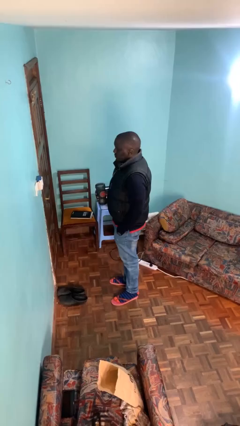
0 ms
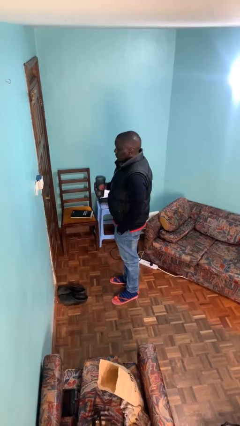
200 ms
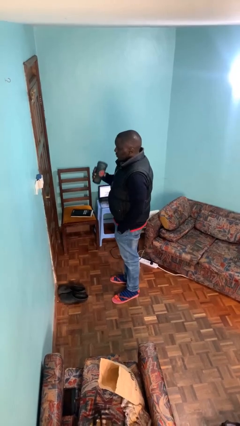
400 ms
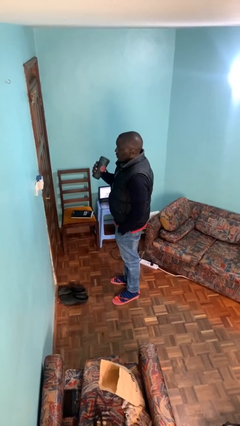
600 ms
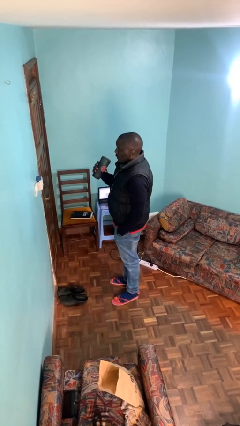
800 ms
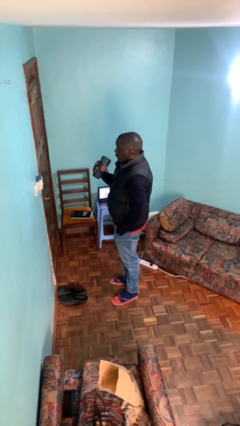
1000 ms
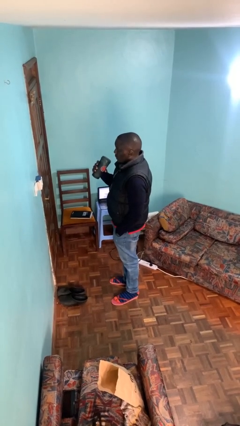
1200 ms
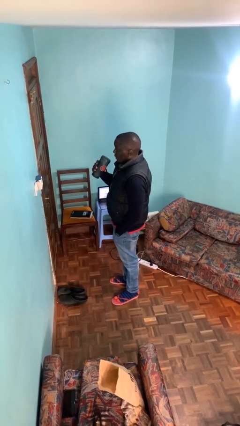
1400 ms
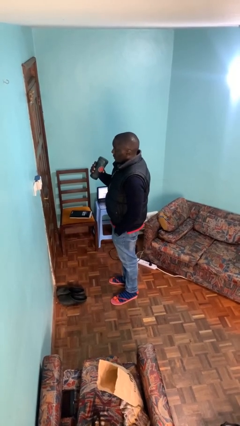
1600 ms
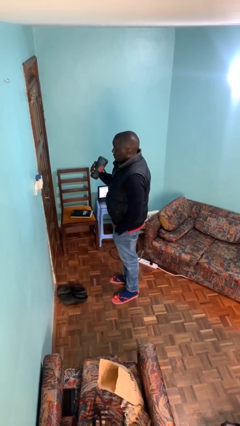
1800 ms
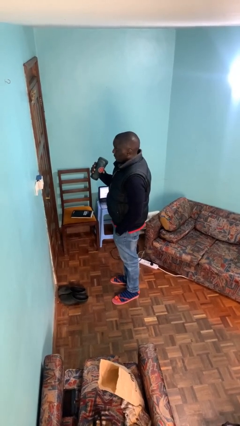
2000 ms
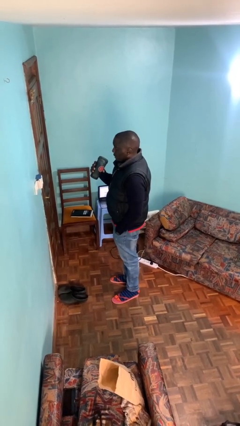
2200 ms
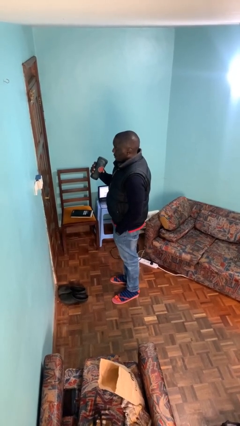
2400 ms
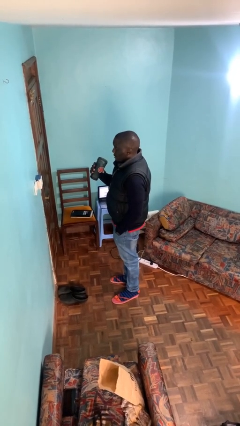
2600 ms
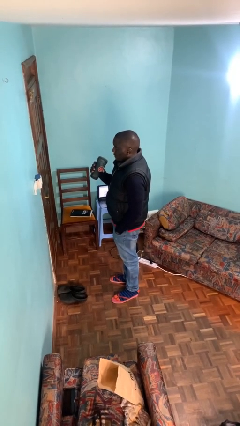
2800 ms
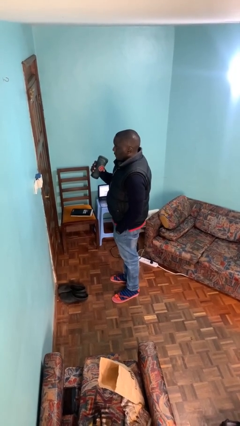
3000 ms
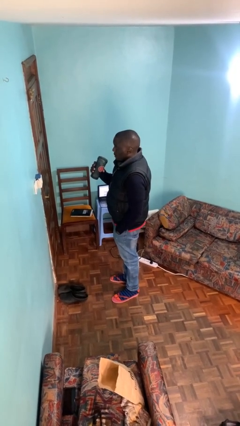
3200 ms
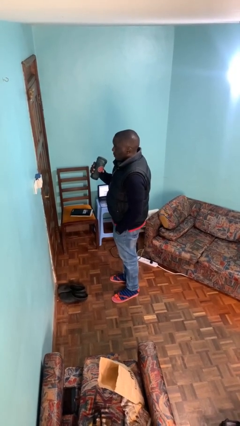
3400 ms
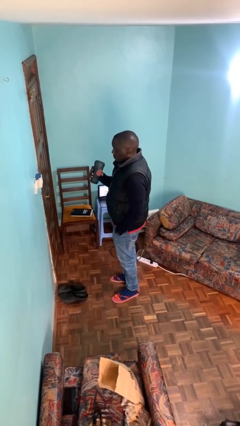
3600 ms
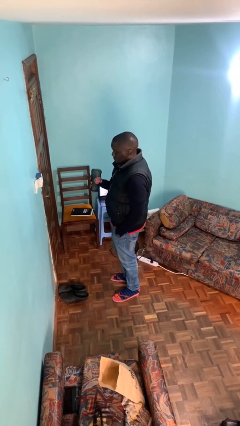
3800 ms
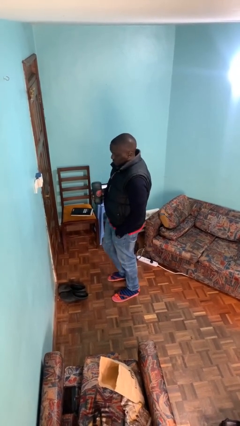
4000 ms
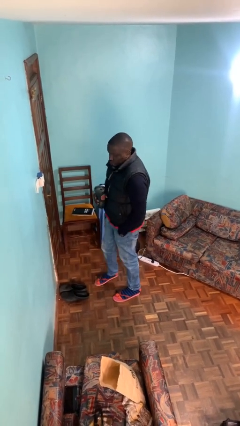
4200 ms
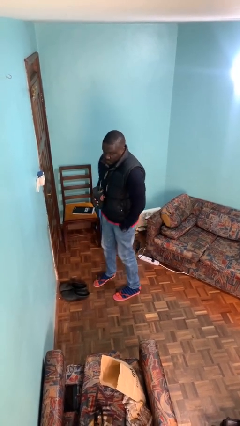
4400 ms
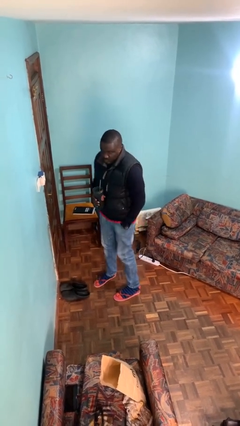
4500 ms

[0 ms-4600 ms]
person drinks from straw

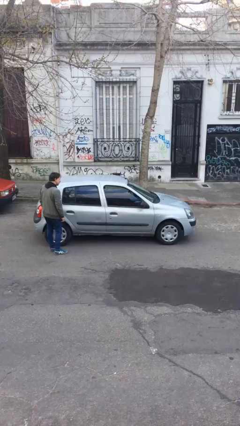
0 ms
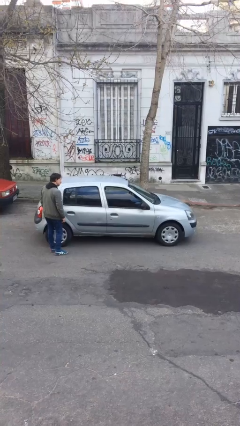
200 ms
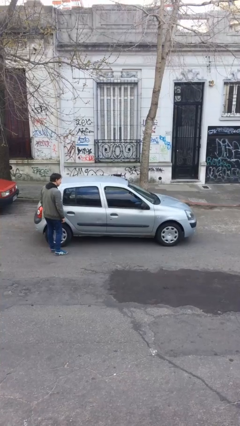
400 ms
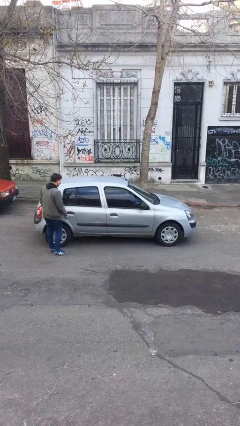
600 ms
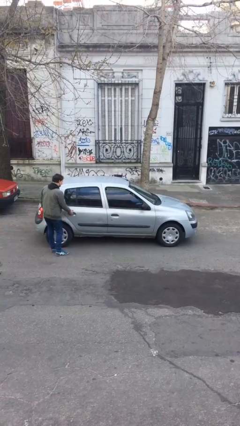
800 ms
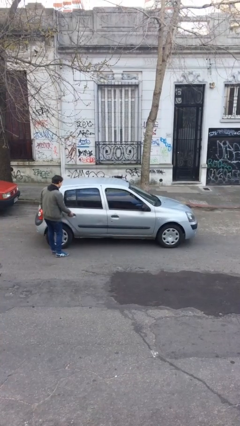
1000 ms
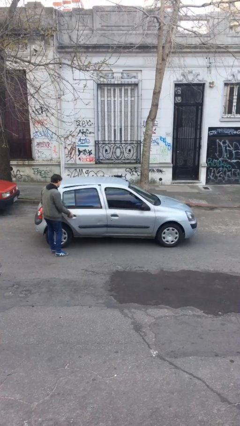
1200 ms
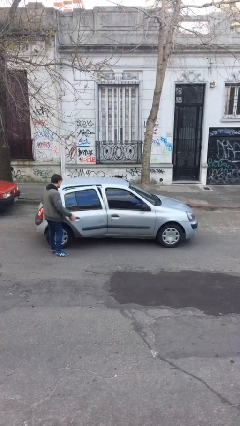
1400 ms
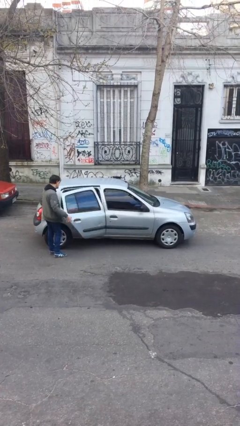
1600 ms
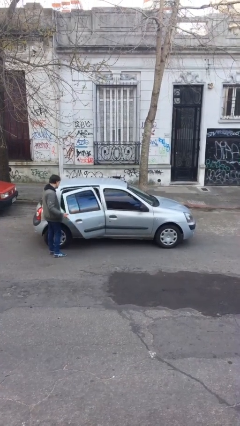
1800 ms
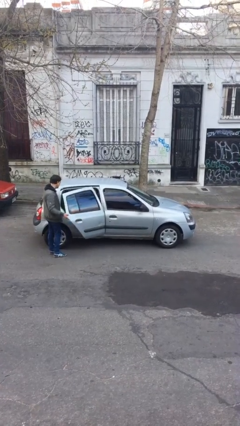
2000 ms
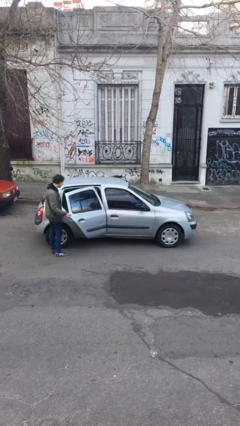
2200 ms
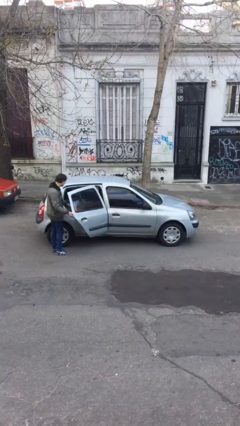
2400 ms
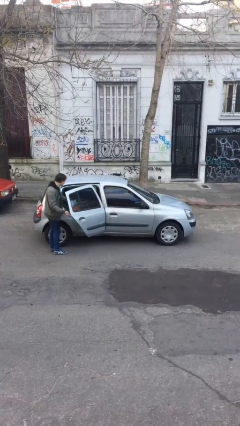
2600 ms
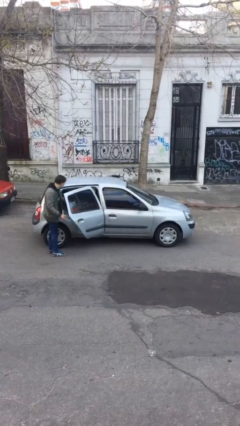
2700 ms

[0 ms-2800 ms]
person opens car door

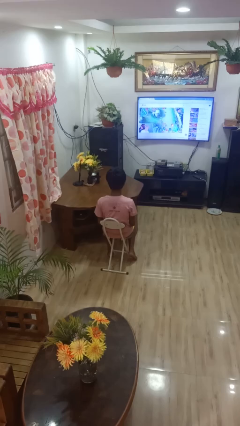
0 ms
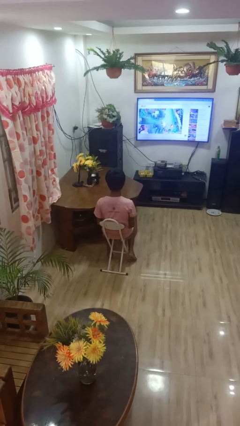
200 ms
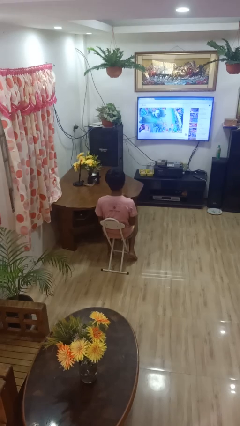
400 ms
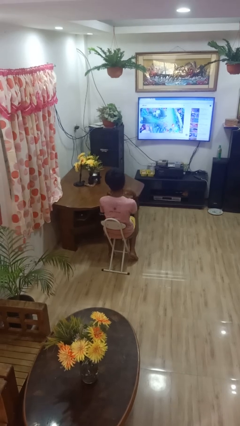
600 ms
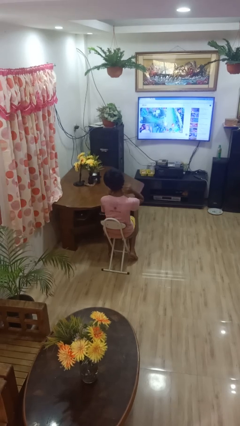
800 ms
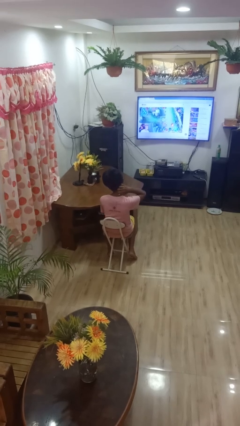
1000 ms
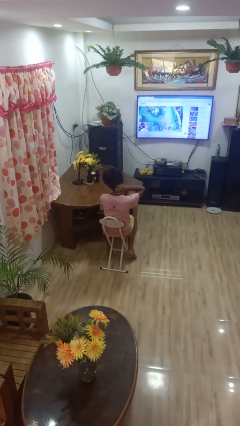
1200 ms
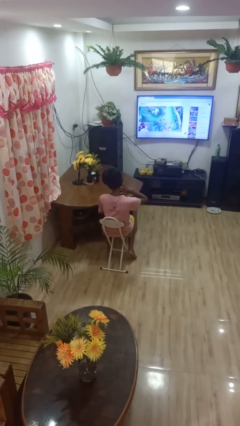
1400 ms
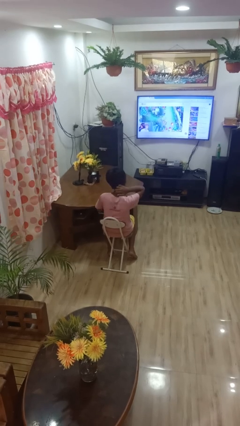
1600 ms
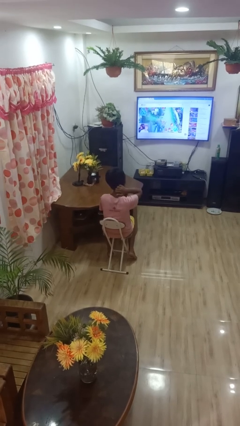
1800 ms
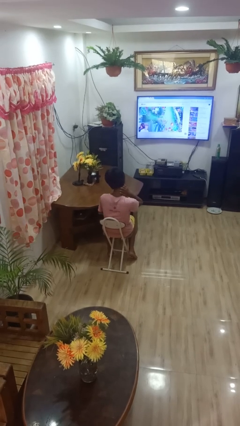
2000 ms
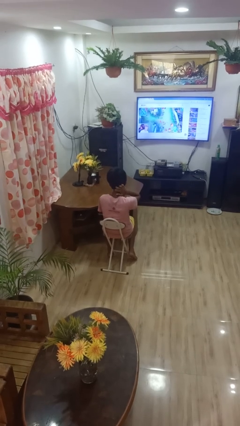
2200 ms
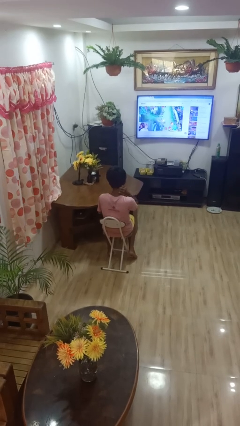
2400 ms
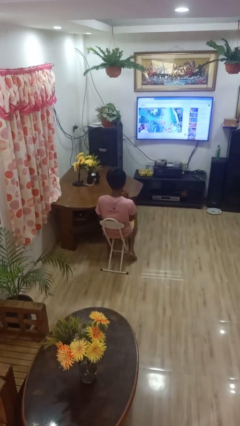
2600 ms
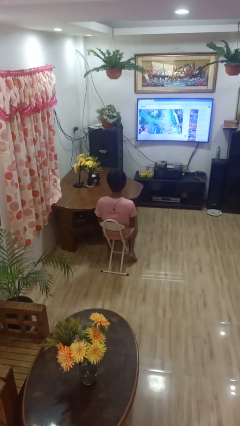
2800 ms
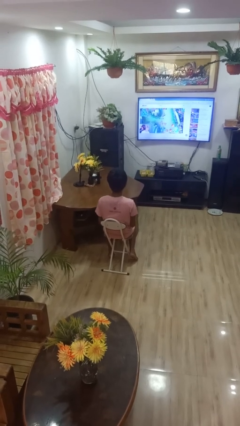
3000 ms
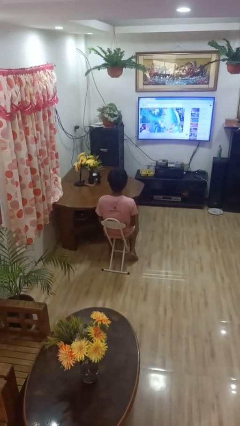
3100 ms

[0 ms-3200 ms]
person rubs neck

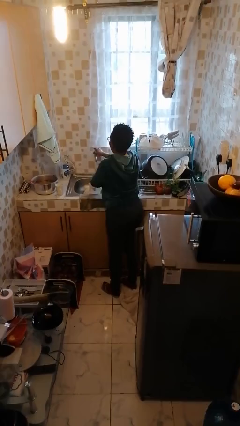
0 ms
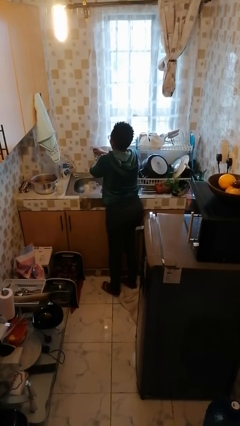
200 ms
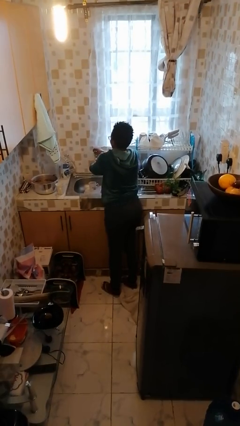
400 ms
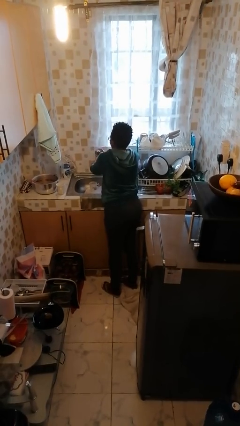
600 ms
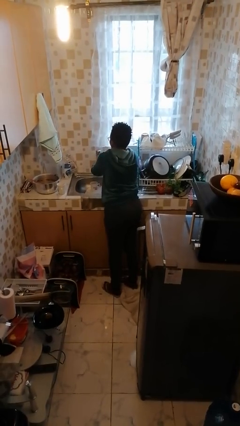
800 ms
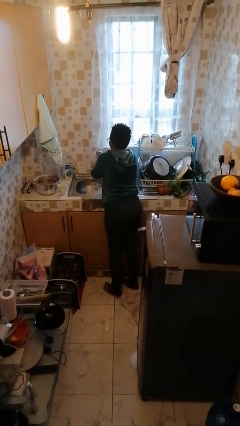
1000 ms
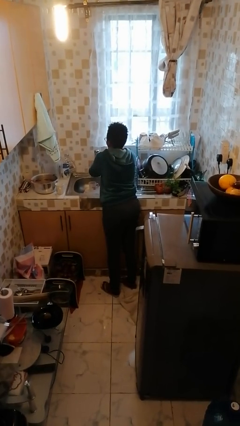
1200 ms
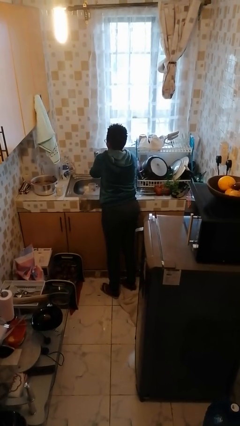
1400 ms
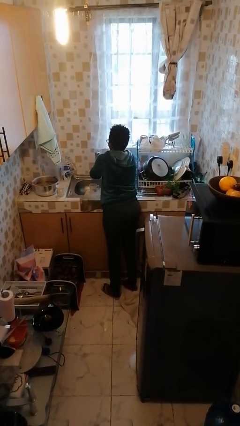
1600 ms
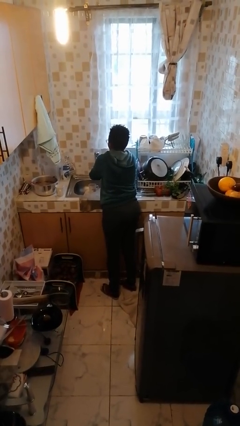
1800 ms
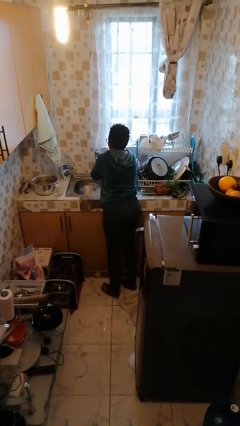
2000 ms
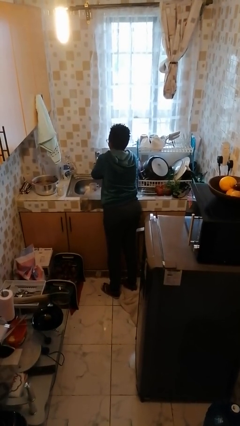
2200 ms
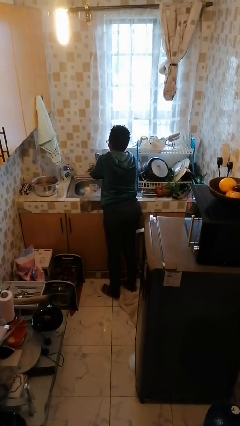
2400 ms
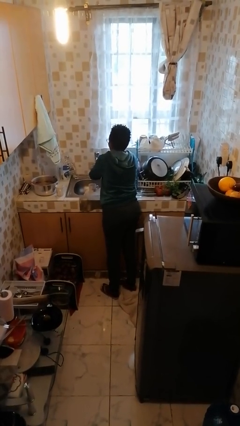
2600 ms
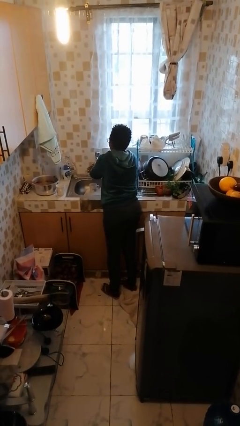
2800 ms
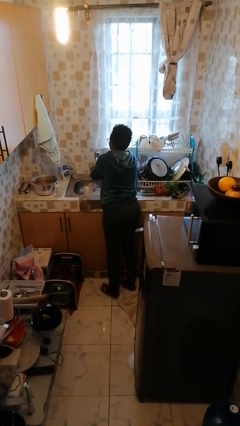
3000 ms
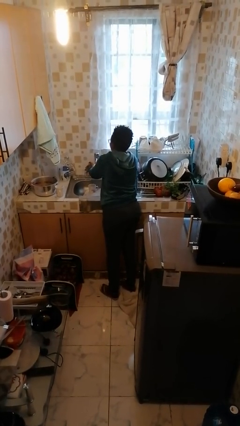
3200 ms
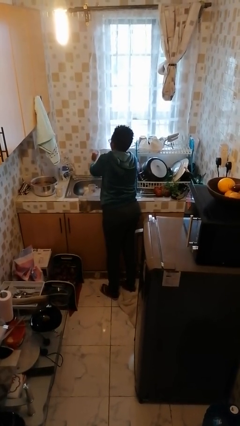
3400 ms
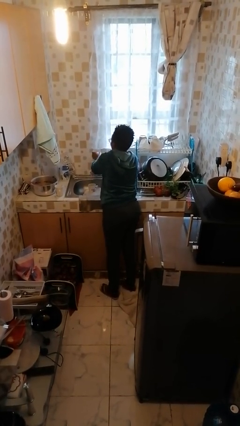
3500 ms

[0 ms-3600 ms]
person washes hands

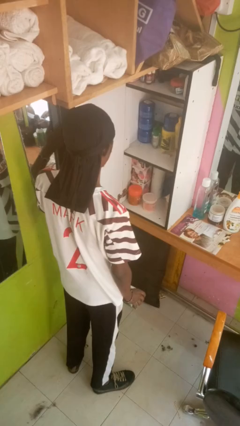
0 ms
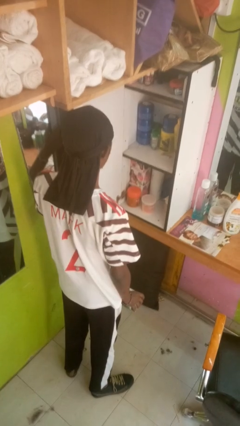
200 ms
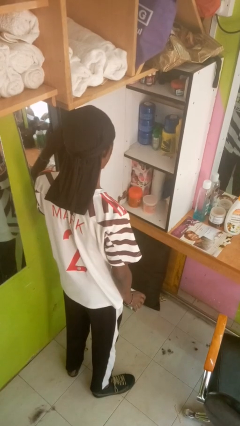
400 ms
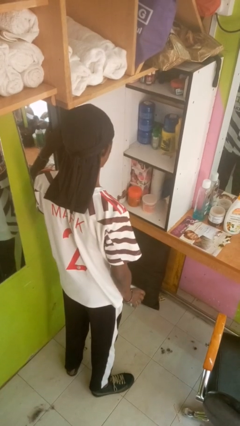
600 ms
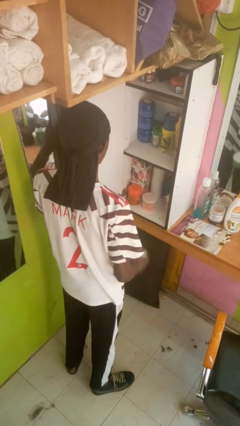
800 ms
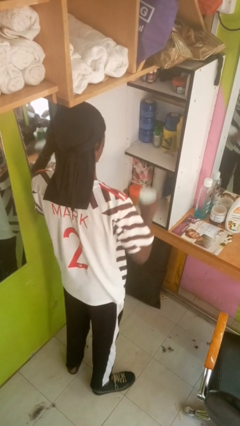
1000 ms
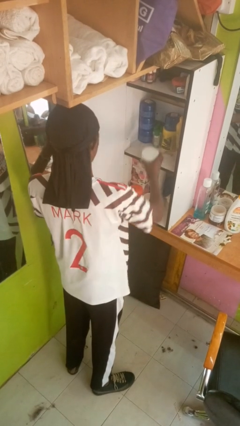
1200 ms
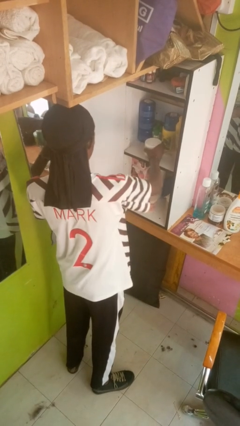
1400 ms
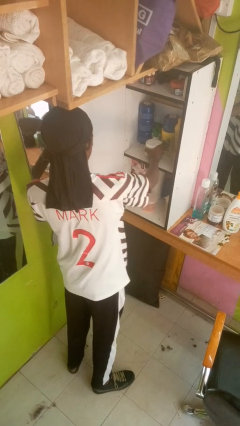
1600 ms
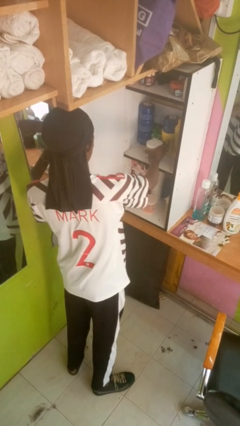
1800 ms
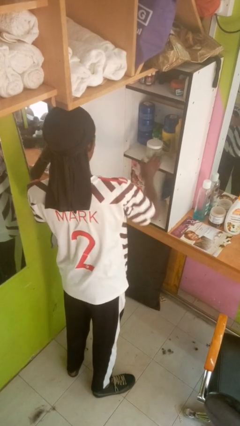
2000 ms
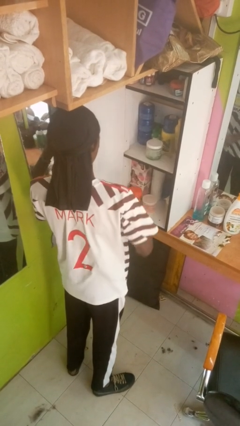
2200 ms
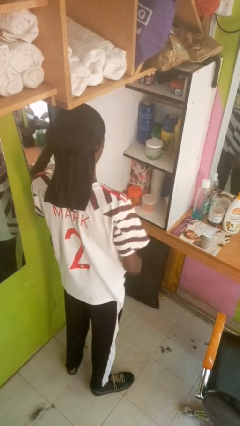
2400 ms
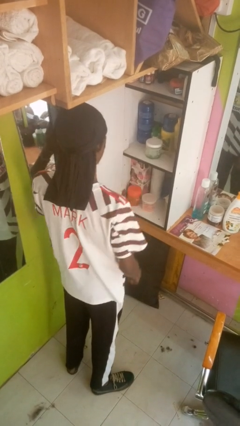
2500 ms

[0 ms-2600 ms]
person puts down object into cabinet

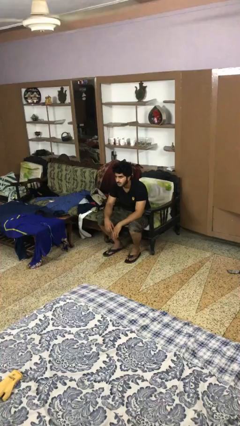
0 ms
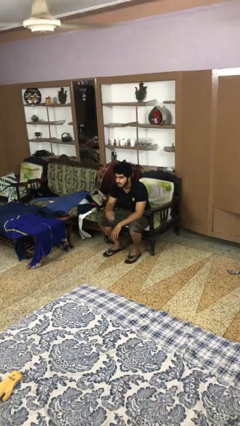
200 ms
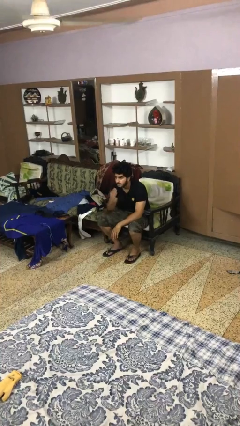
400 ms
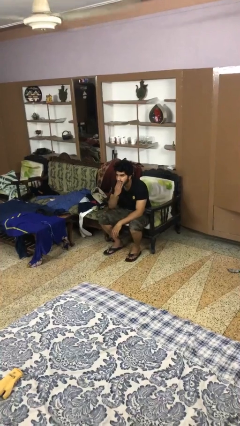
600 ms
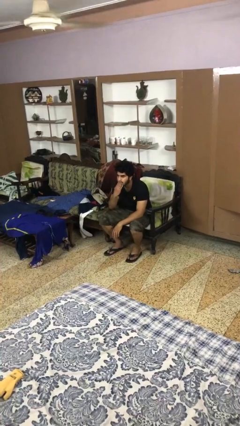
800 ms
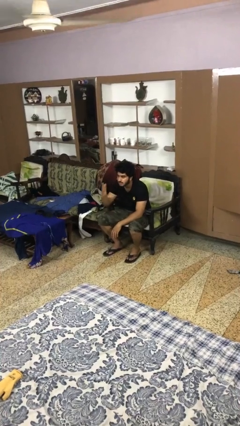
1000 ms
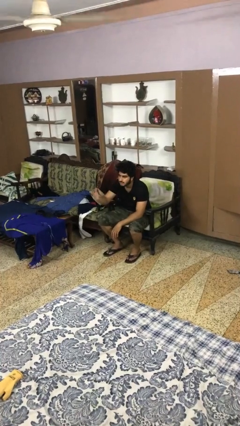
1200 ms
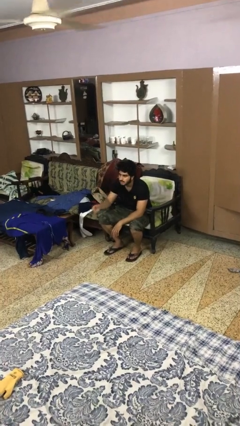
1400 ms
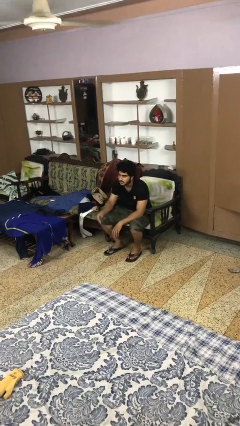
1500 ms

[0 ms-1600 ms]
person gestures blow kiss
